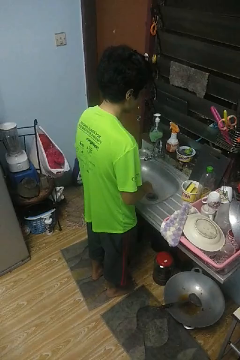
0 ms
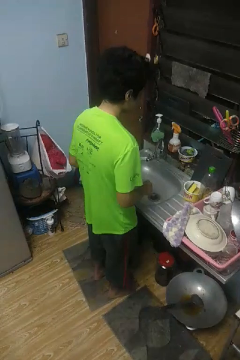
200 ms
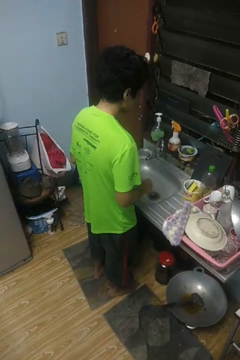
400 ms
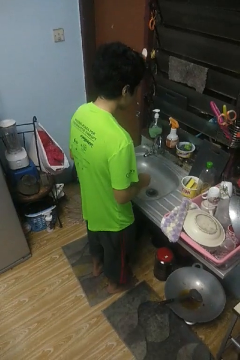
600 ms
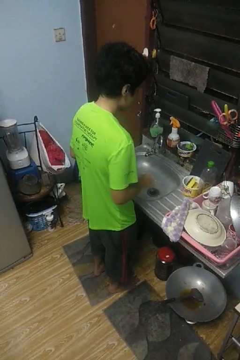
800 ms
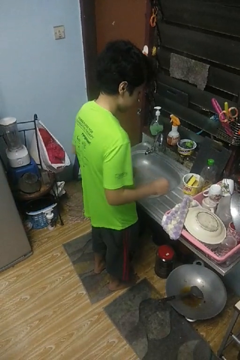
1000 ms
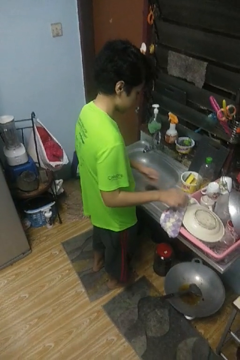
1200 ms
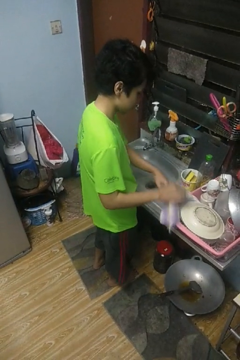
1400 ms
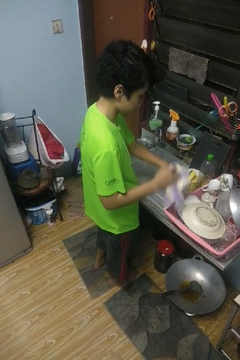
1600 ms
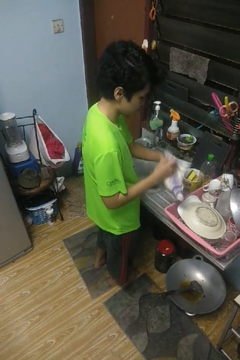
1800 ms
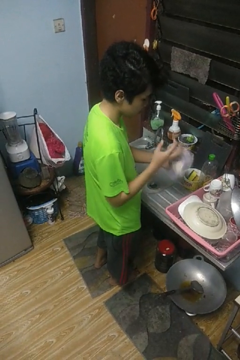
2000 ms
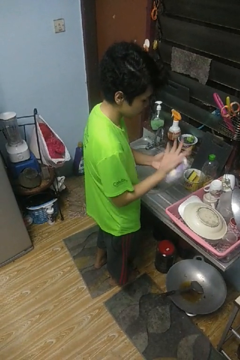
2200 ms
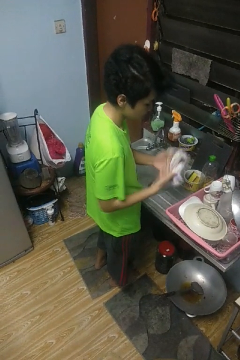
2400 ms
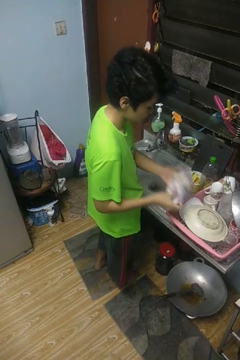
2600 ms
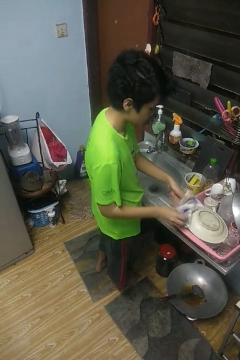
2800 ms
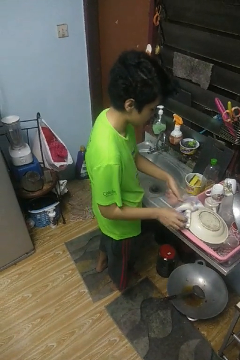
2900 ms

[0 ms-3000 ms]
person dries hands with towel

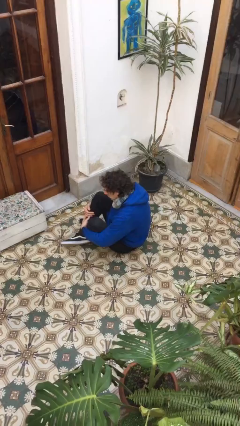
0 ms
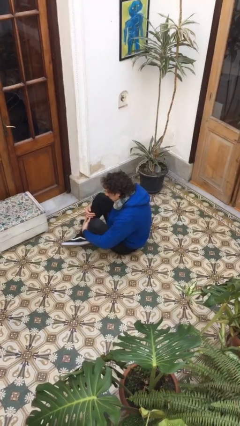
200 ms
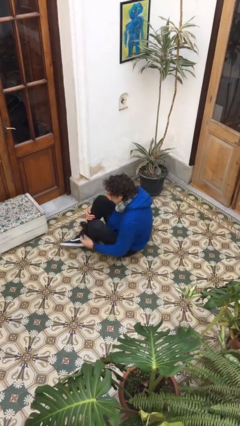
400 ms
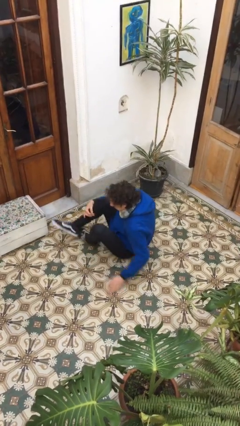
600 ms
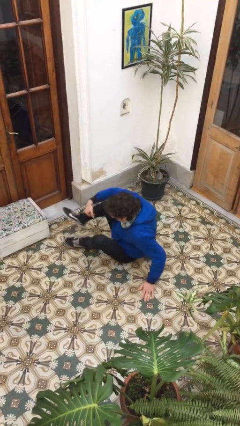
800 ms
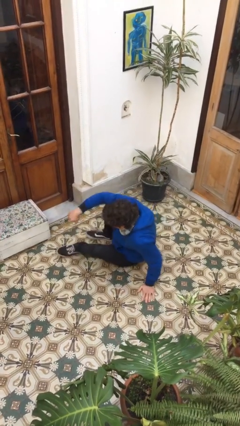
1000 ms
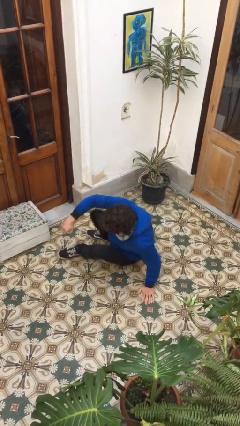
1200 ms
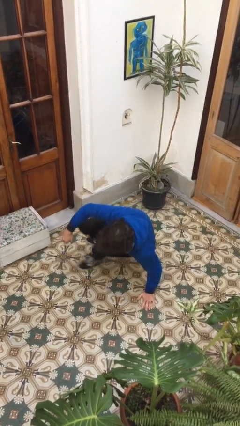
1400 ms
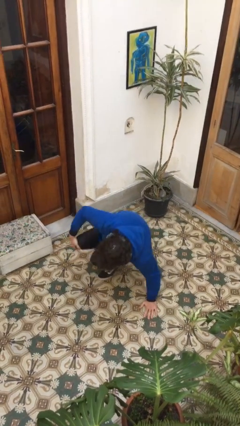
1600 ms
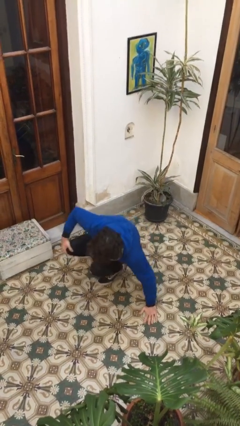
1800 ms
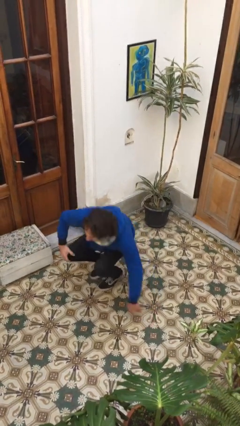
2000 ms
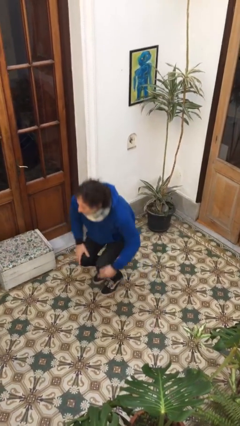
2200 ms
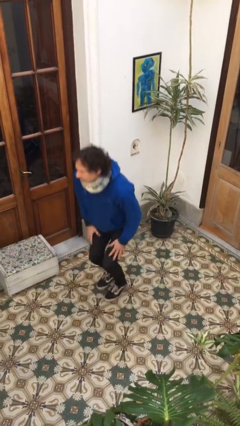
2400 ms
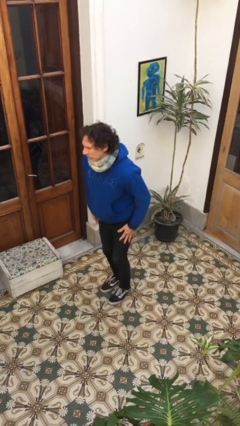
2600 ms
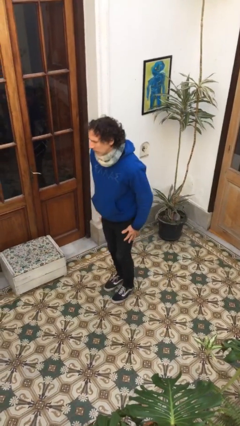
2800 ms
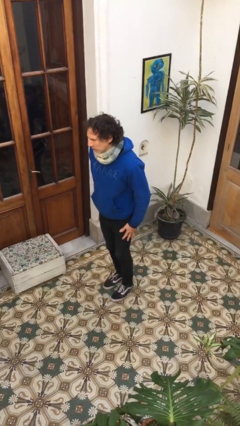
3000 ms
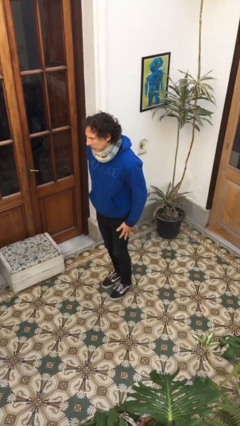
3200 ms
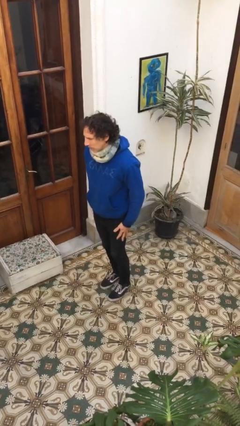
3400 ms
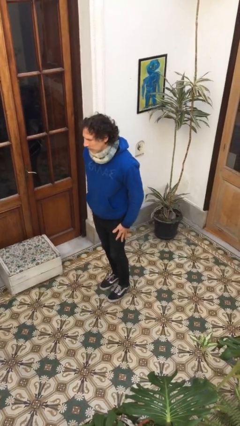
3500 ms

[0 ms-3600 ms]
person stands up from floor

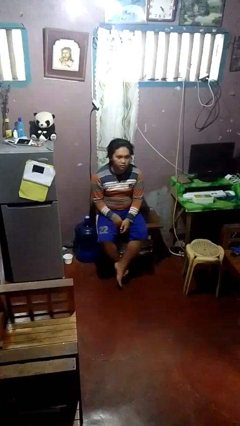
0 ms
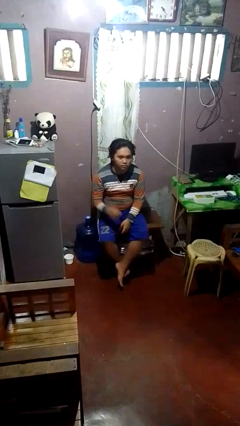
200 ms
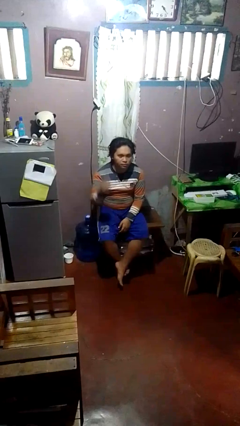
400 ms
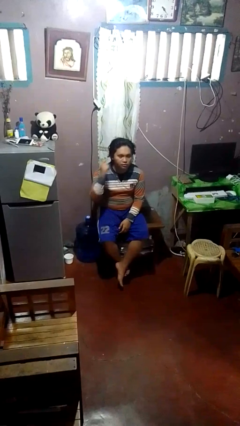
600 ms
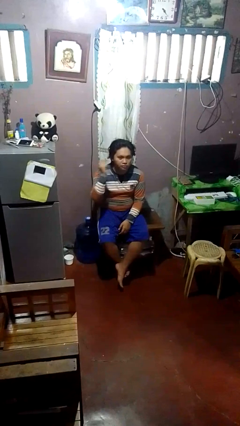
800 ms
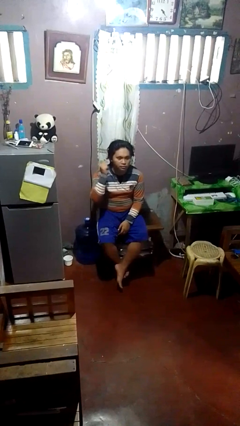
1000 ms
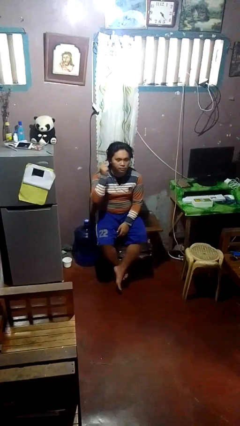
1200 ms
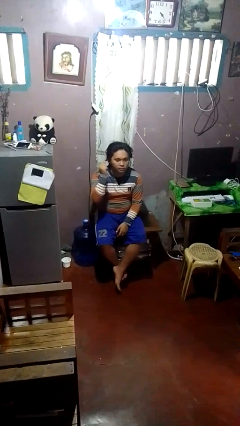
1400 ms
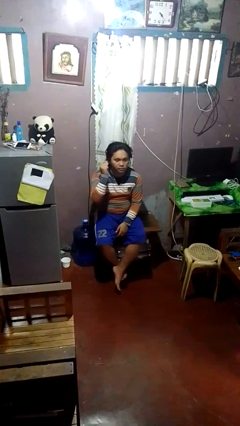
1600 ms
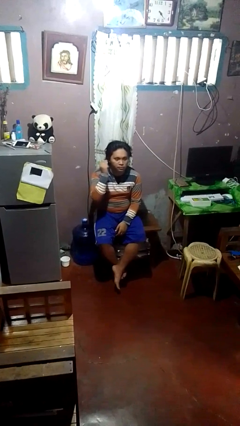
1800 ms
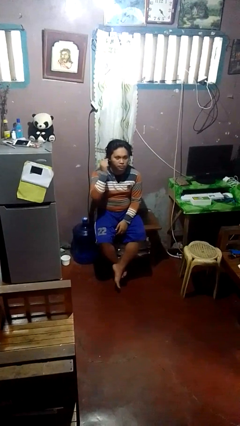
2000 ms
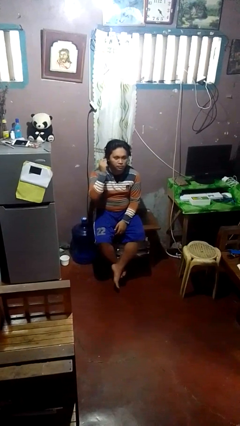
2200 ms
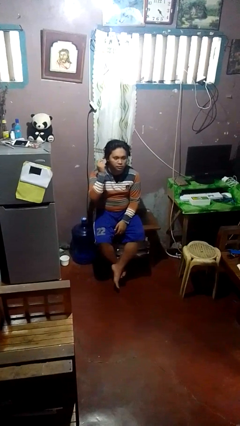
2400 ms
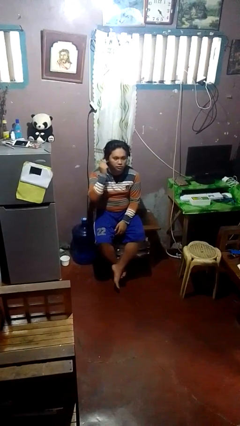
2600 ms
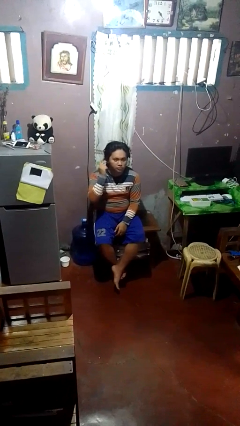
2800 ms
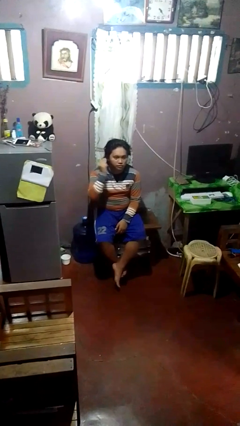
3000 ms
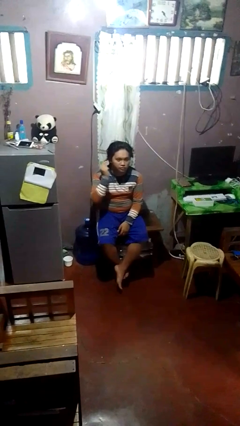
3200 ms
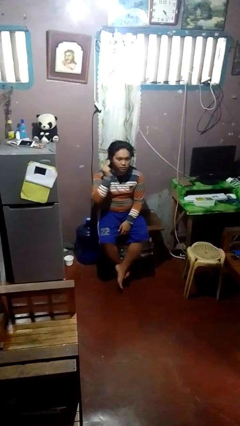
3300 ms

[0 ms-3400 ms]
person gestures listen closely

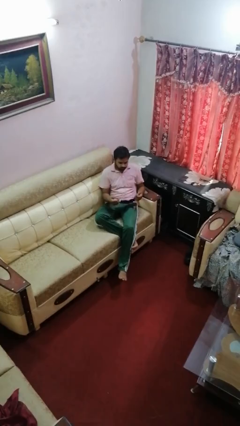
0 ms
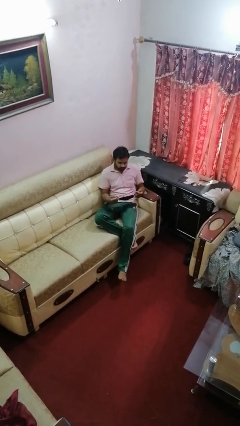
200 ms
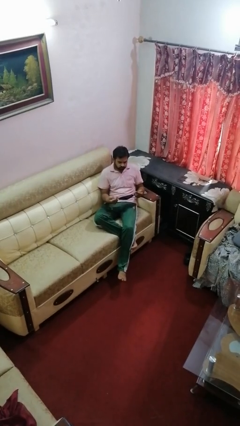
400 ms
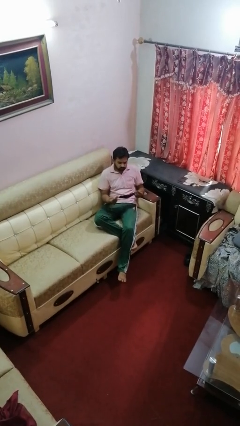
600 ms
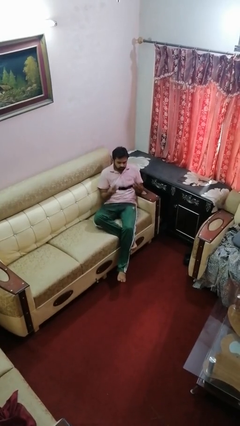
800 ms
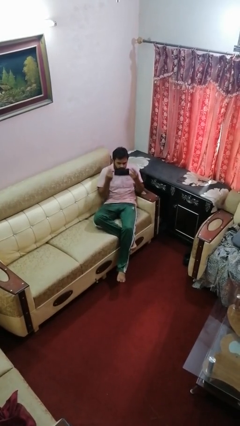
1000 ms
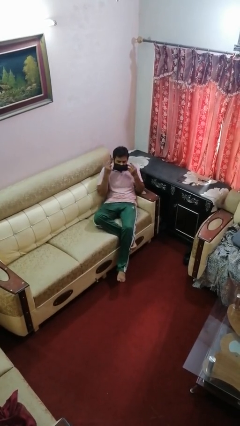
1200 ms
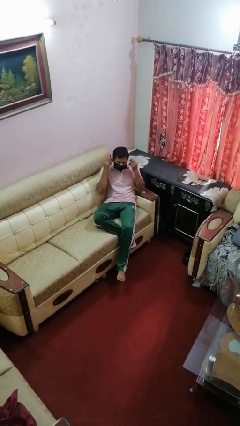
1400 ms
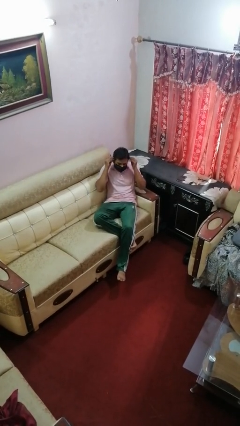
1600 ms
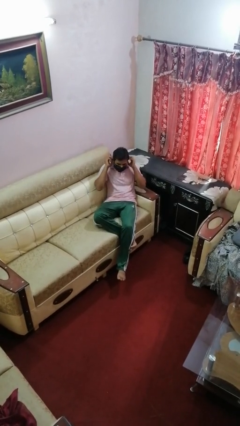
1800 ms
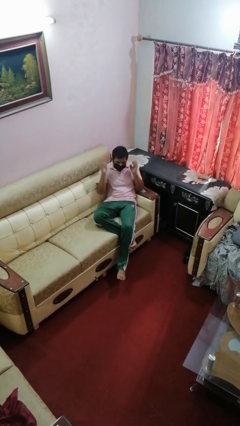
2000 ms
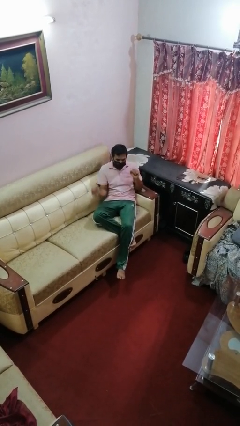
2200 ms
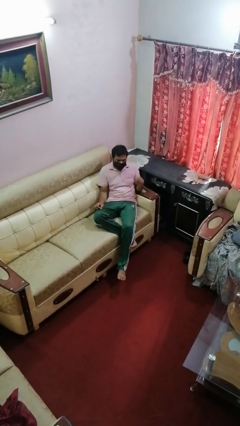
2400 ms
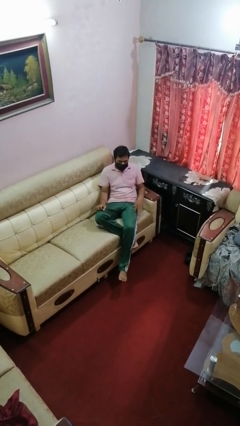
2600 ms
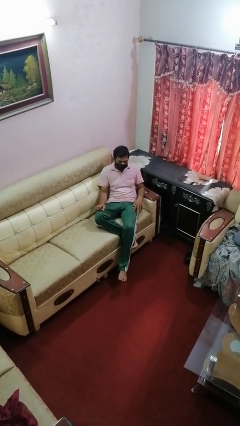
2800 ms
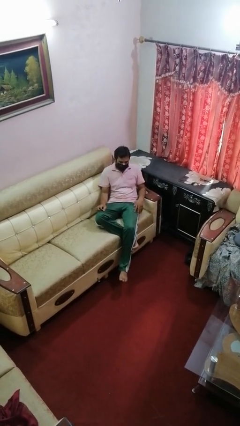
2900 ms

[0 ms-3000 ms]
person puts on facemask

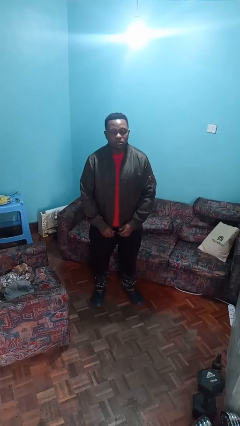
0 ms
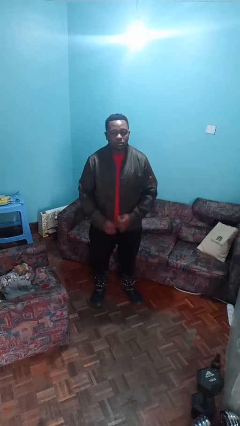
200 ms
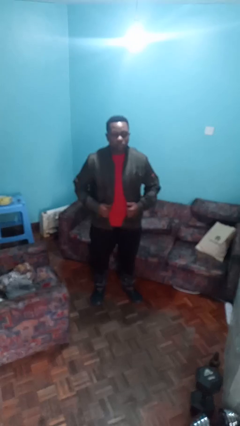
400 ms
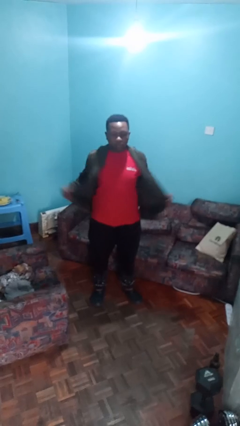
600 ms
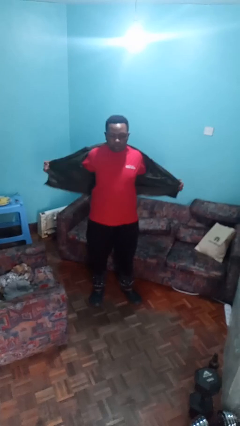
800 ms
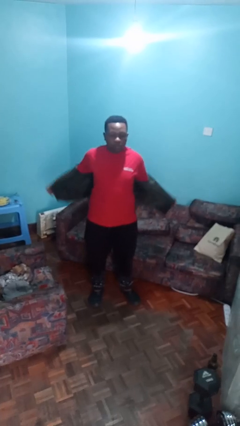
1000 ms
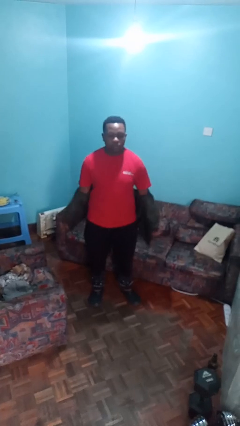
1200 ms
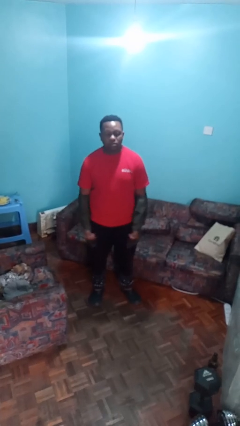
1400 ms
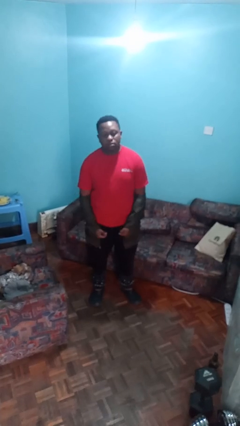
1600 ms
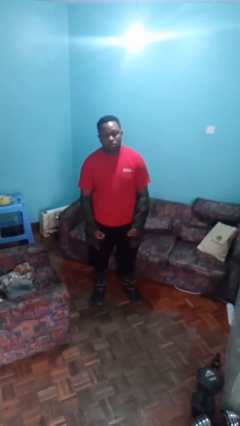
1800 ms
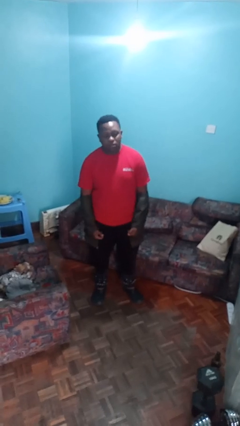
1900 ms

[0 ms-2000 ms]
person takes off jacket

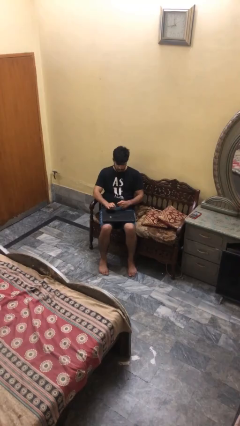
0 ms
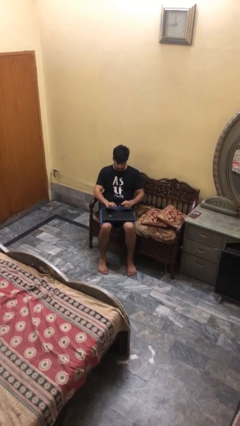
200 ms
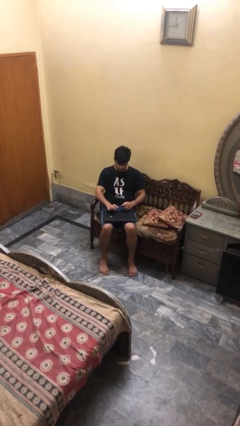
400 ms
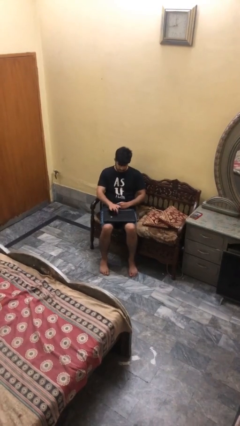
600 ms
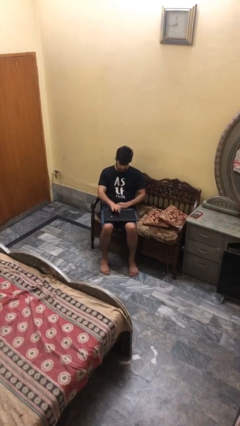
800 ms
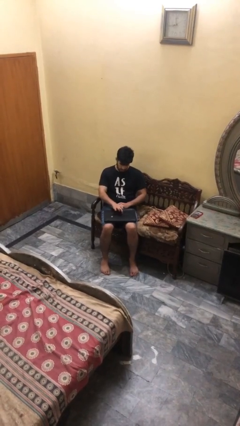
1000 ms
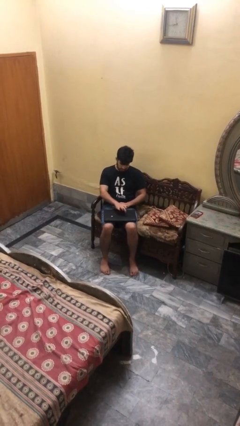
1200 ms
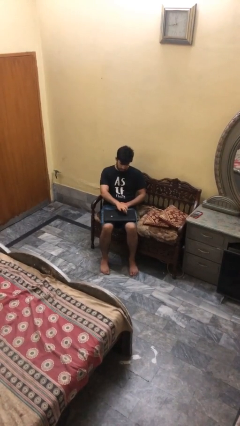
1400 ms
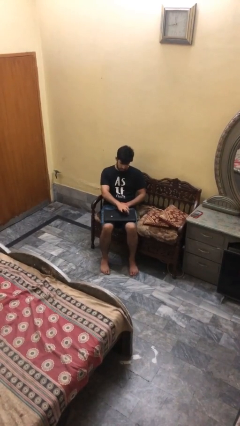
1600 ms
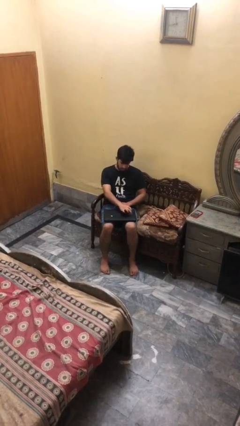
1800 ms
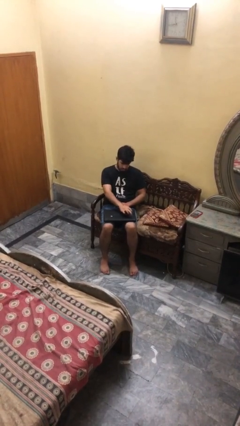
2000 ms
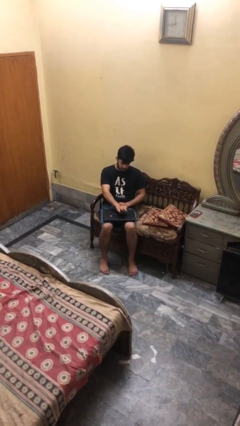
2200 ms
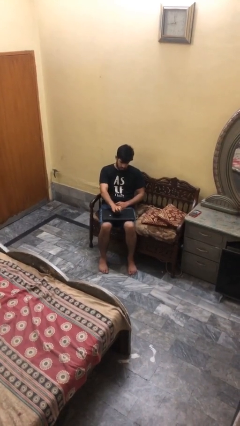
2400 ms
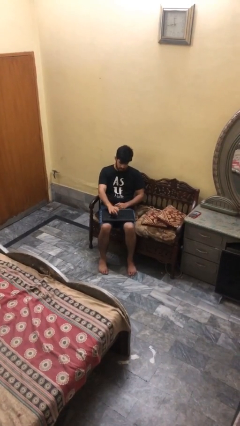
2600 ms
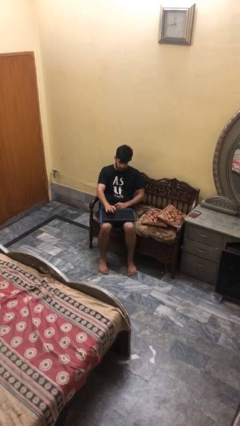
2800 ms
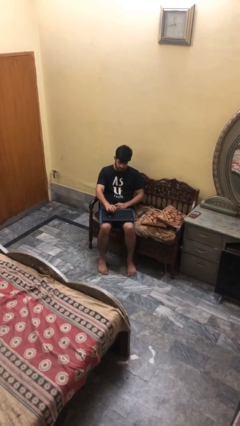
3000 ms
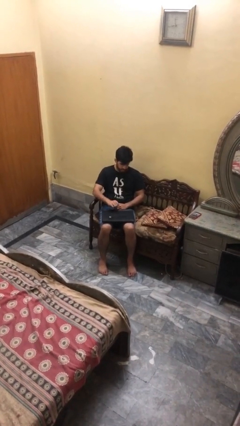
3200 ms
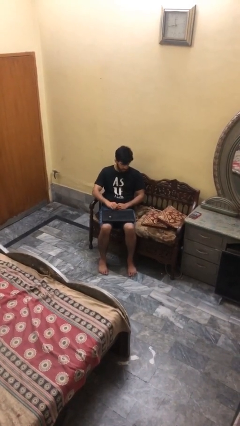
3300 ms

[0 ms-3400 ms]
person taps object with finger
